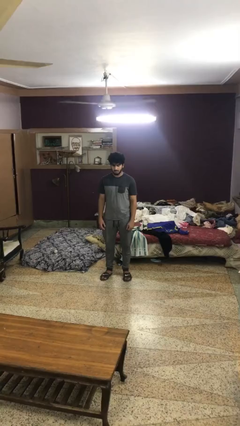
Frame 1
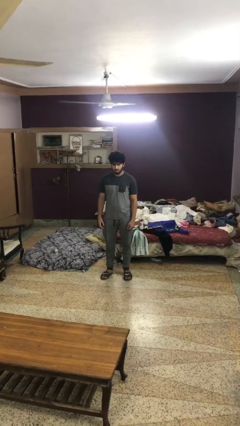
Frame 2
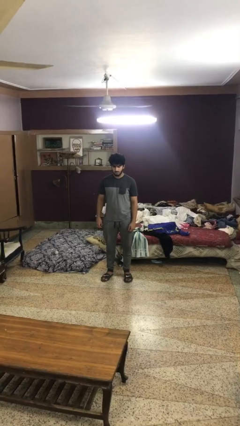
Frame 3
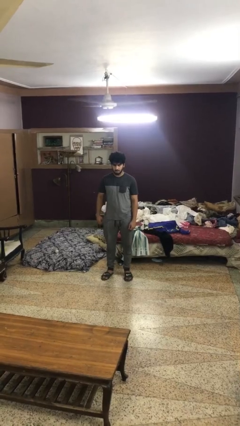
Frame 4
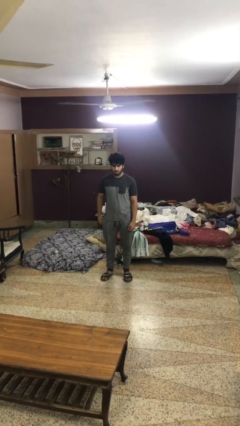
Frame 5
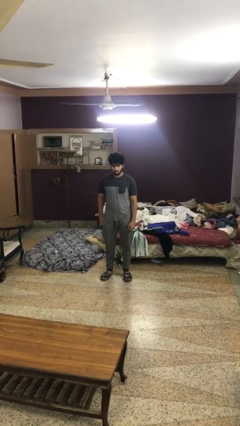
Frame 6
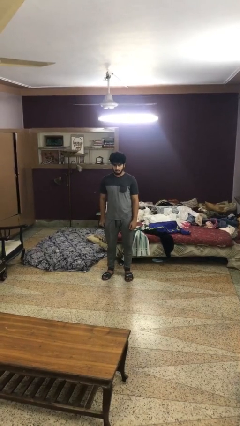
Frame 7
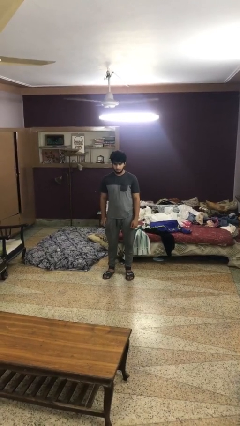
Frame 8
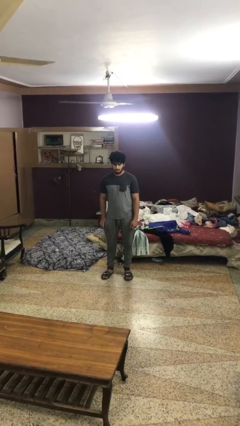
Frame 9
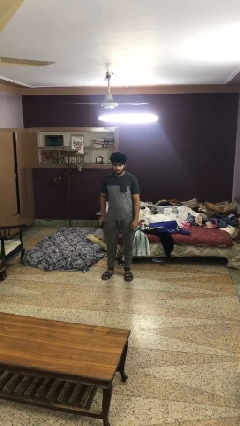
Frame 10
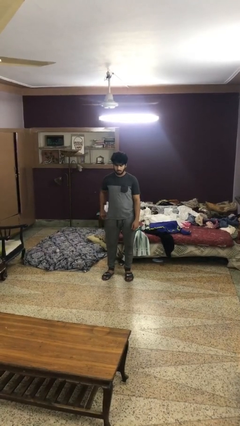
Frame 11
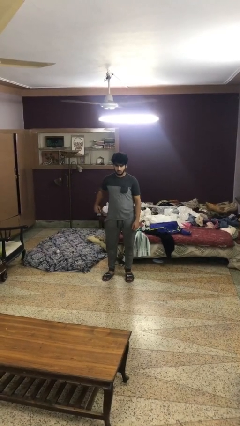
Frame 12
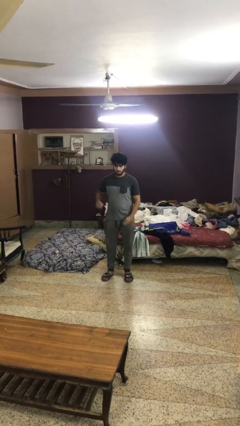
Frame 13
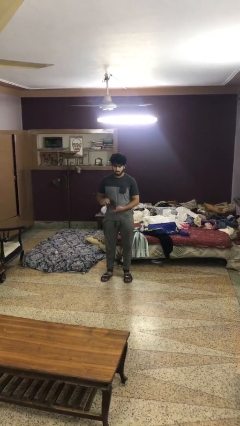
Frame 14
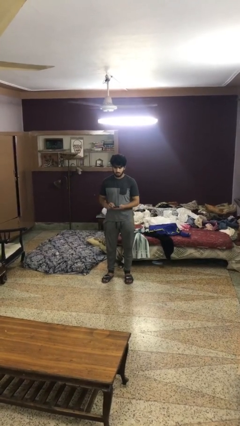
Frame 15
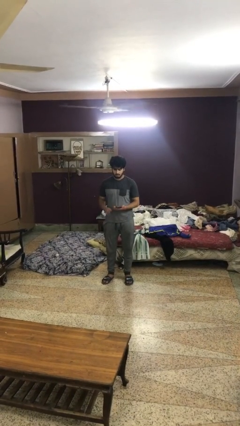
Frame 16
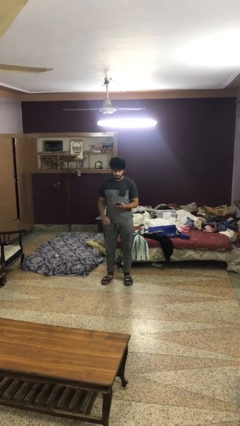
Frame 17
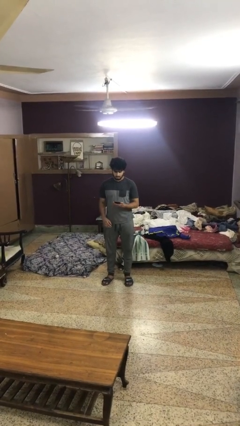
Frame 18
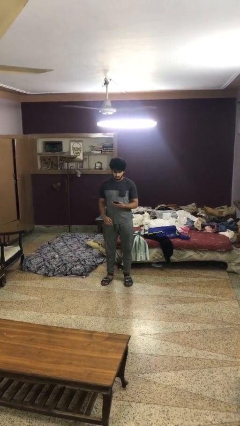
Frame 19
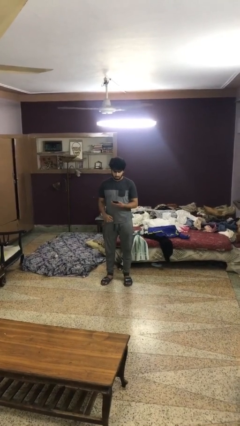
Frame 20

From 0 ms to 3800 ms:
person takes phone from pocket

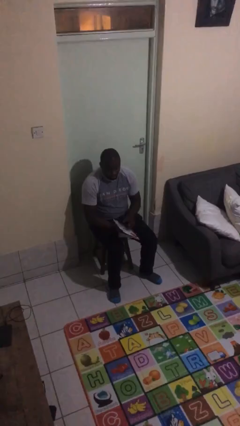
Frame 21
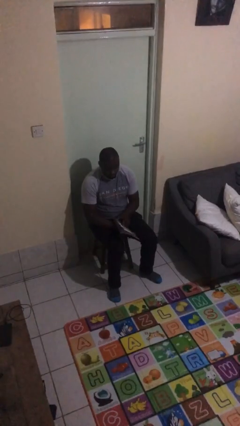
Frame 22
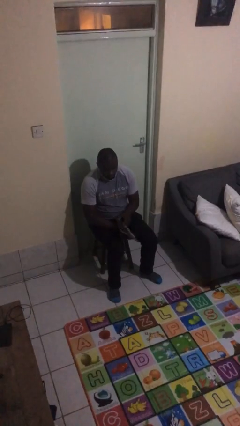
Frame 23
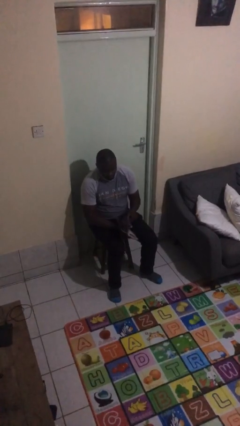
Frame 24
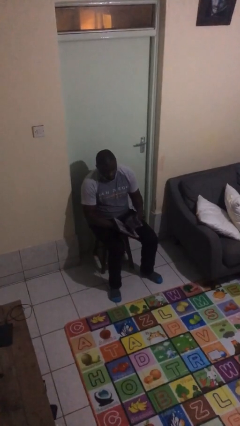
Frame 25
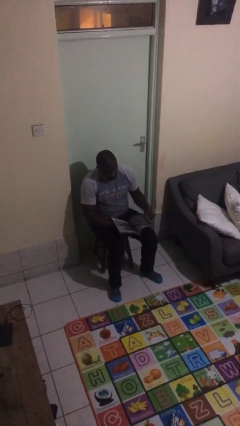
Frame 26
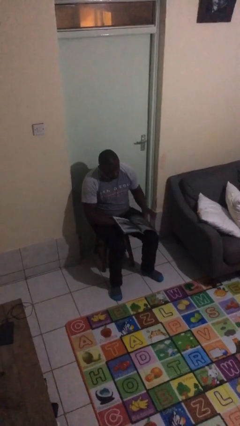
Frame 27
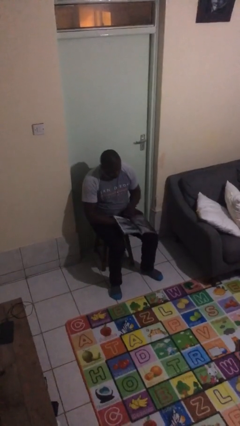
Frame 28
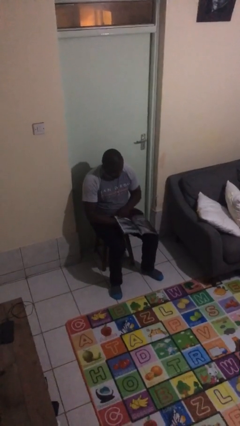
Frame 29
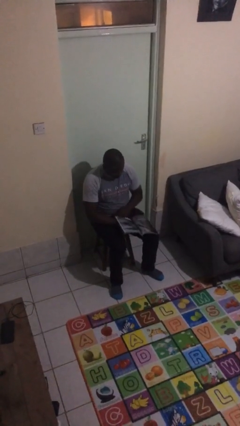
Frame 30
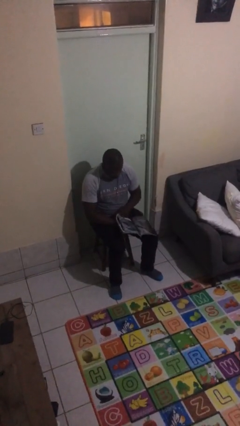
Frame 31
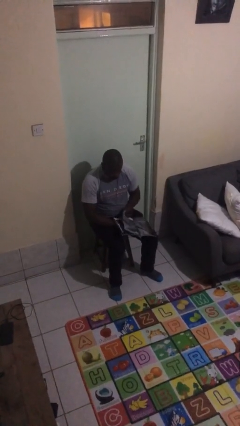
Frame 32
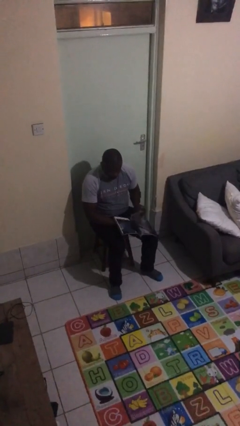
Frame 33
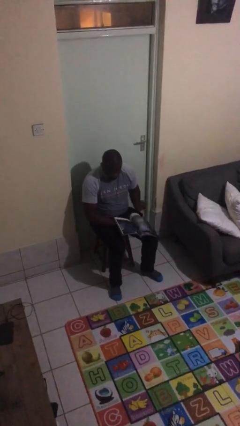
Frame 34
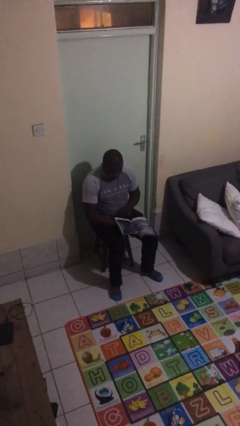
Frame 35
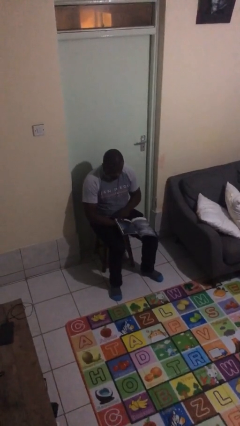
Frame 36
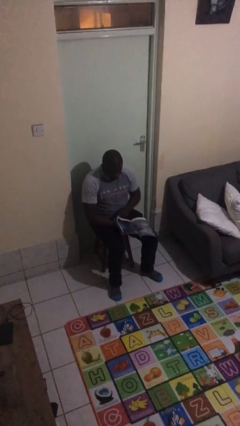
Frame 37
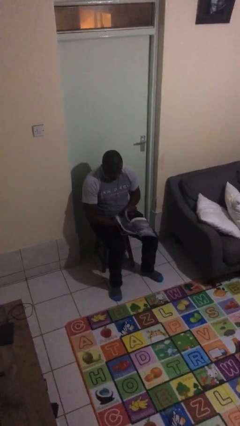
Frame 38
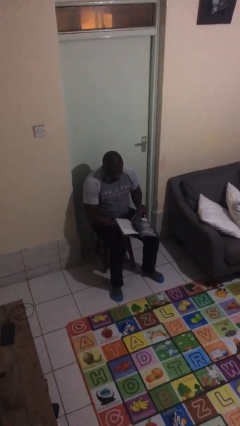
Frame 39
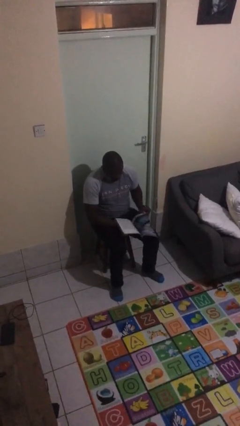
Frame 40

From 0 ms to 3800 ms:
person reads magazine

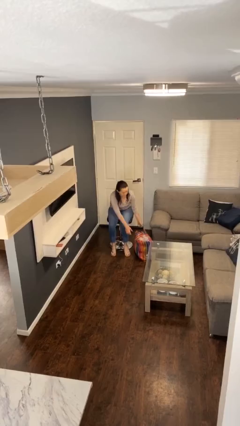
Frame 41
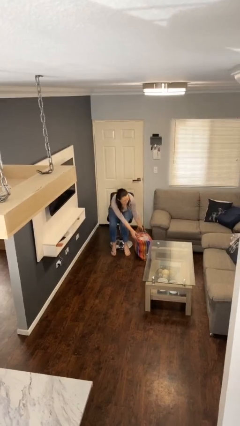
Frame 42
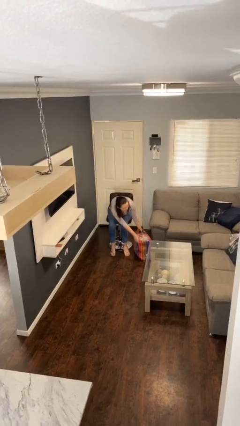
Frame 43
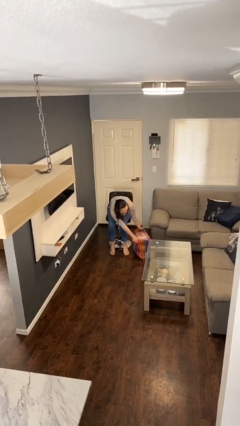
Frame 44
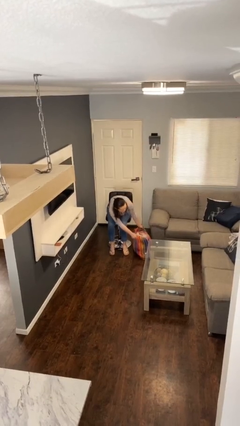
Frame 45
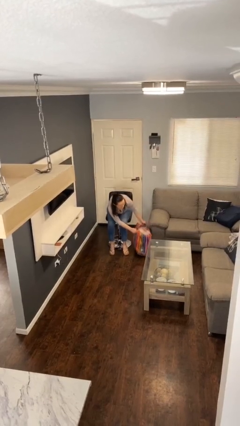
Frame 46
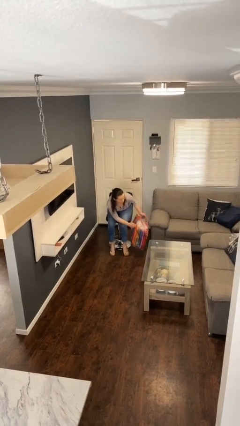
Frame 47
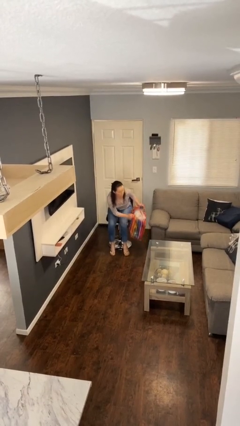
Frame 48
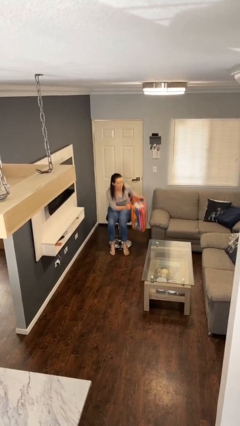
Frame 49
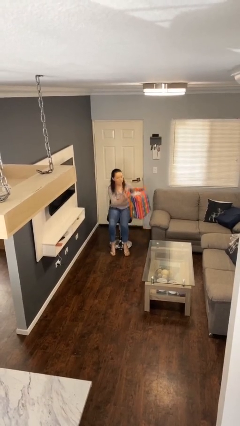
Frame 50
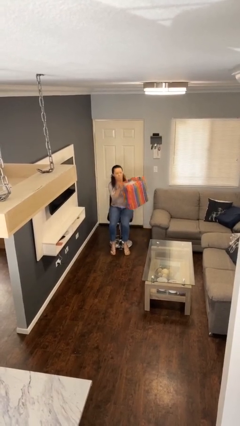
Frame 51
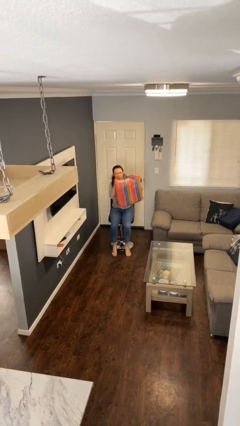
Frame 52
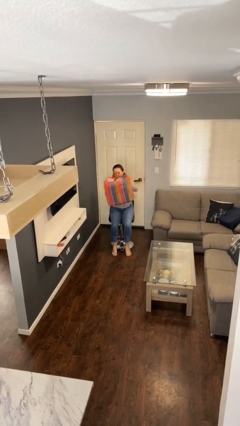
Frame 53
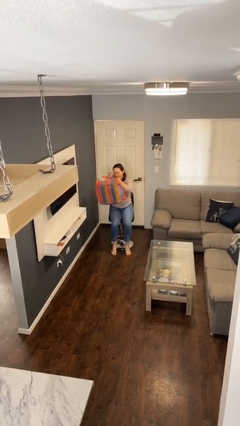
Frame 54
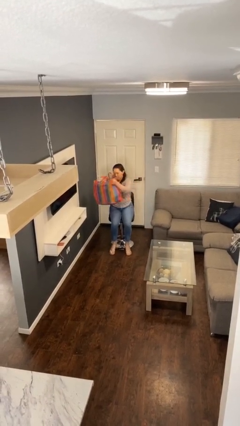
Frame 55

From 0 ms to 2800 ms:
person picks up object from floor

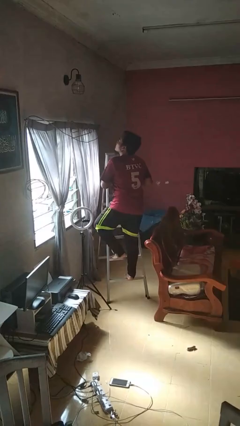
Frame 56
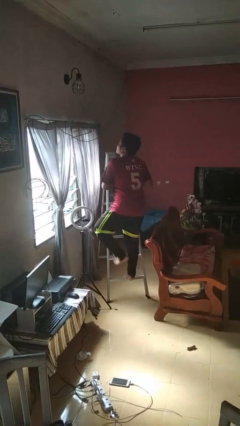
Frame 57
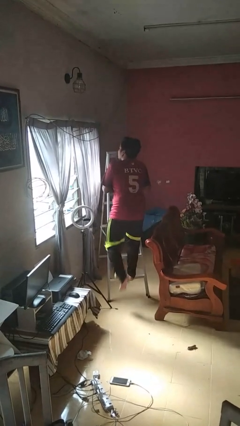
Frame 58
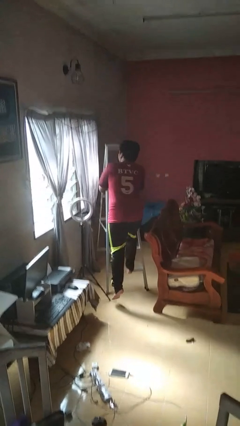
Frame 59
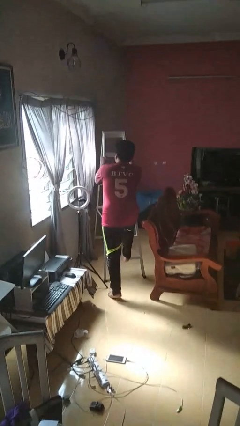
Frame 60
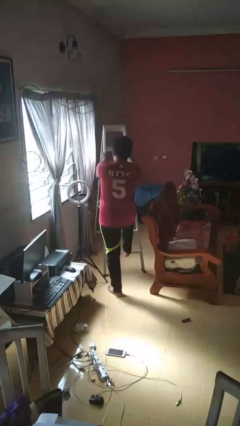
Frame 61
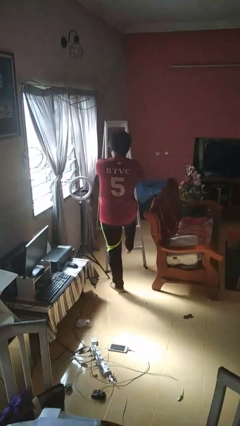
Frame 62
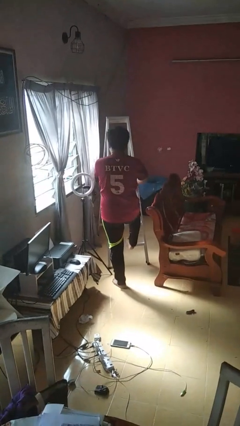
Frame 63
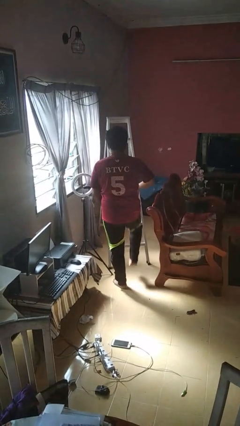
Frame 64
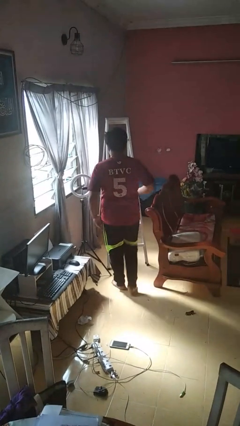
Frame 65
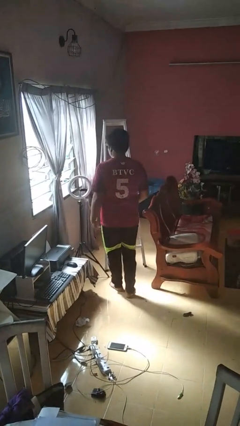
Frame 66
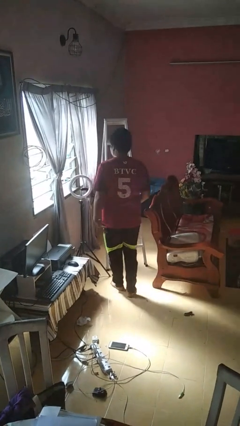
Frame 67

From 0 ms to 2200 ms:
person climbs down ladder

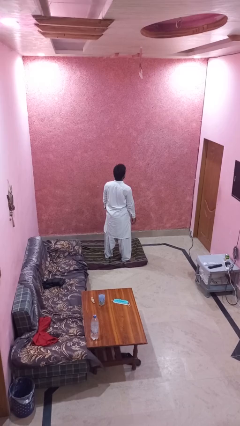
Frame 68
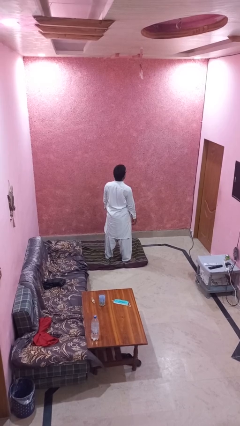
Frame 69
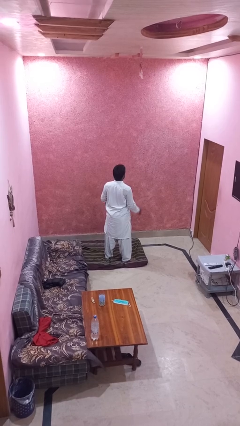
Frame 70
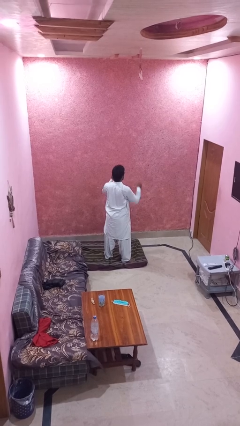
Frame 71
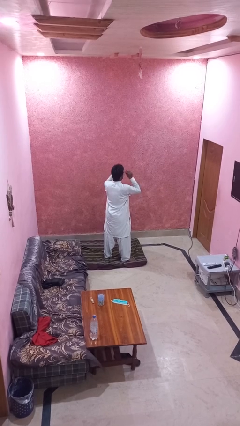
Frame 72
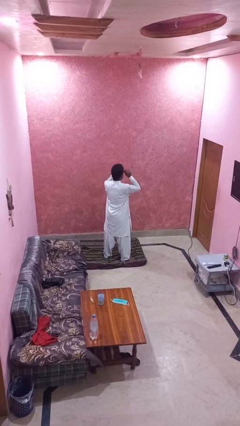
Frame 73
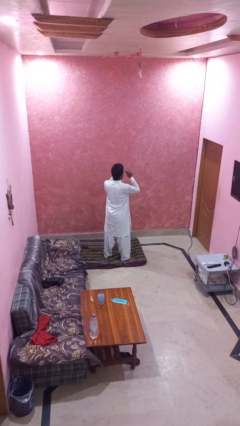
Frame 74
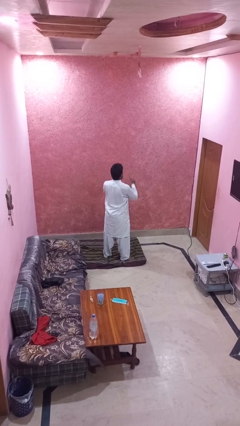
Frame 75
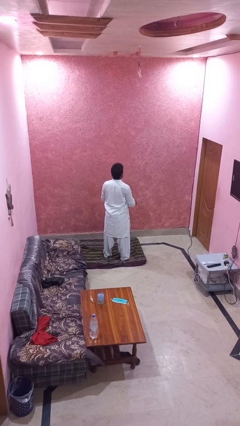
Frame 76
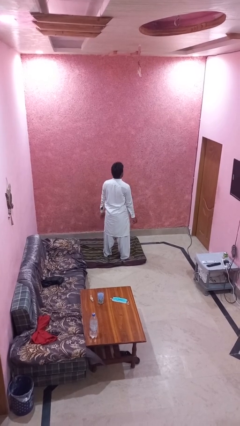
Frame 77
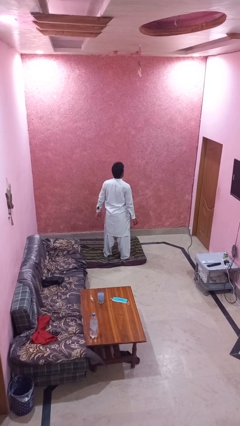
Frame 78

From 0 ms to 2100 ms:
person takes off glasses

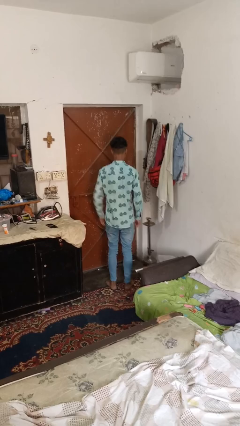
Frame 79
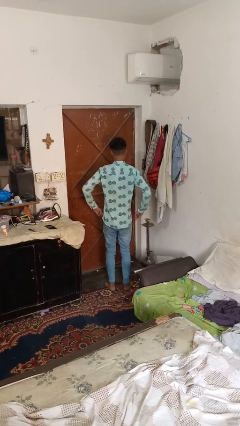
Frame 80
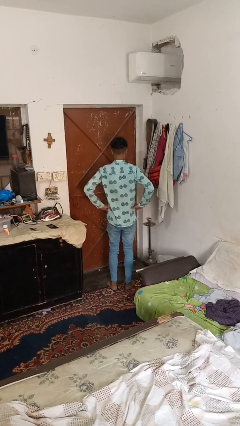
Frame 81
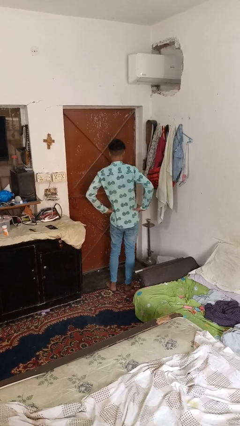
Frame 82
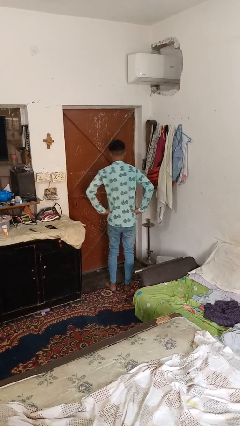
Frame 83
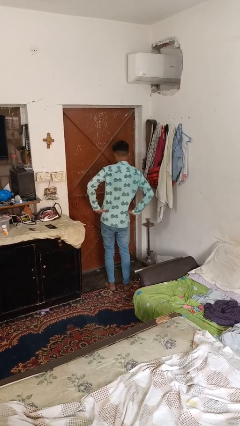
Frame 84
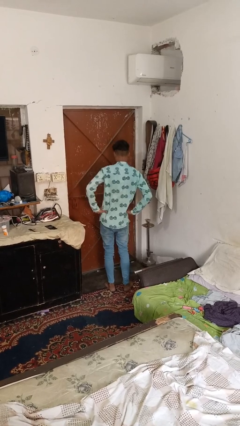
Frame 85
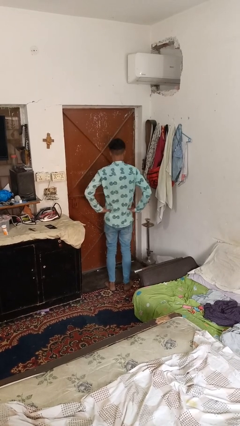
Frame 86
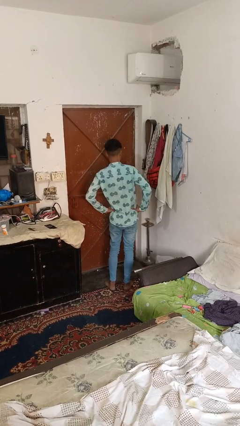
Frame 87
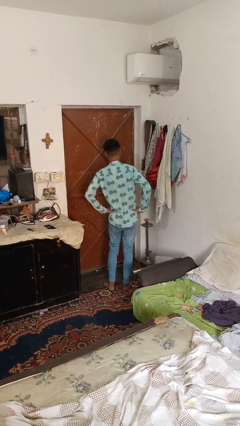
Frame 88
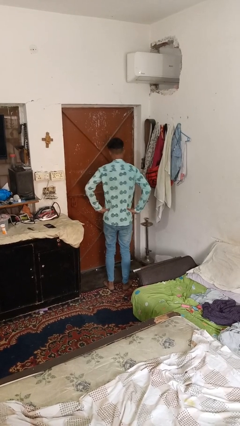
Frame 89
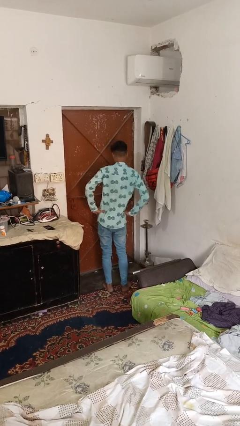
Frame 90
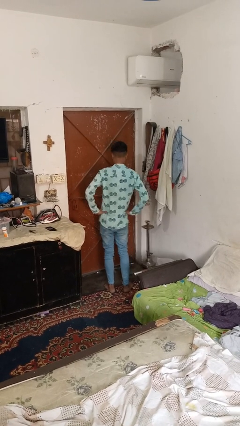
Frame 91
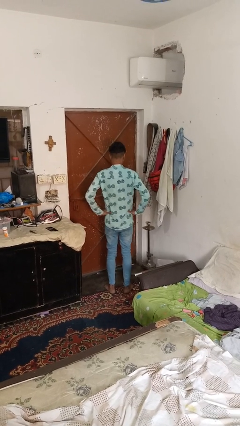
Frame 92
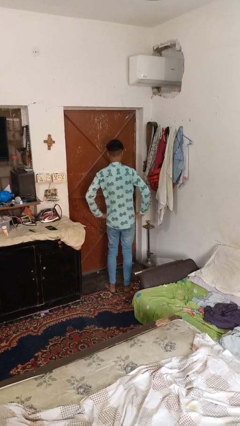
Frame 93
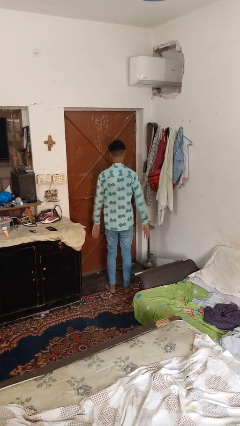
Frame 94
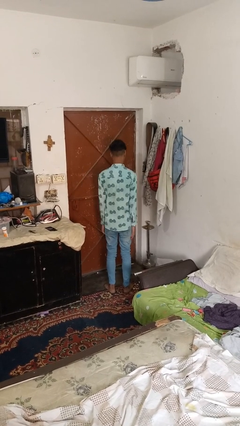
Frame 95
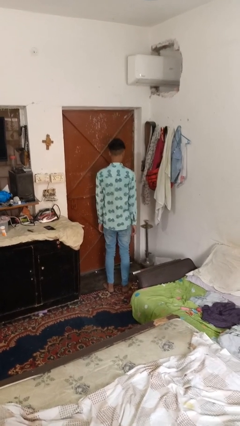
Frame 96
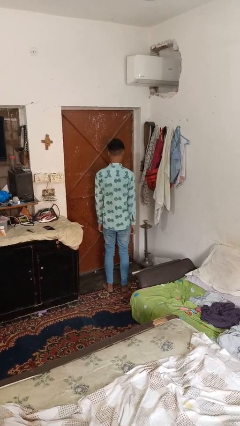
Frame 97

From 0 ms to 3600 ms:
person wiggles hips
